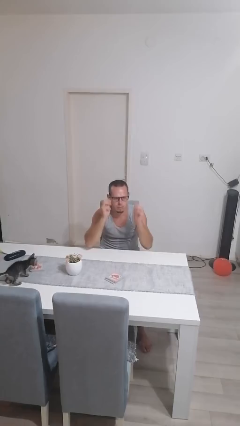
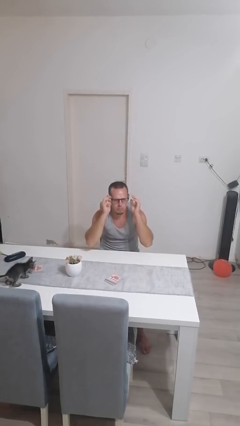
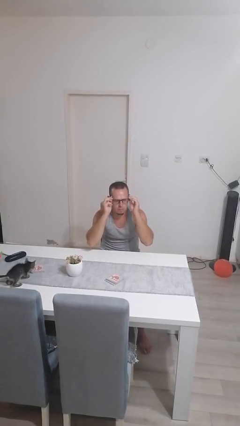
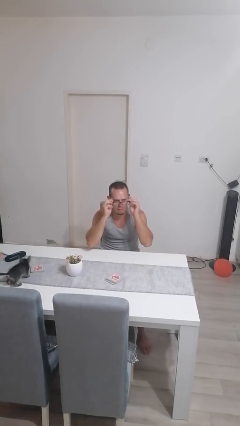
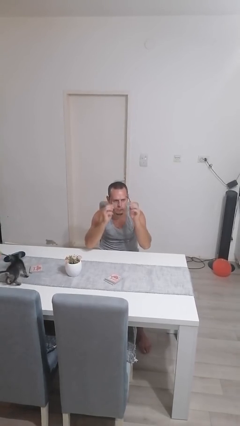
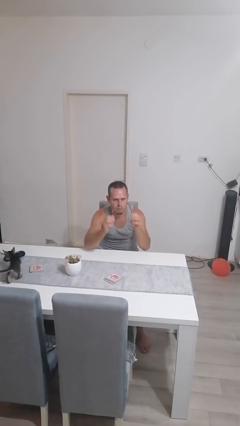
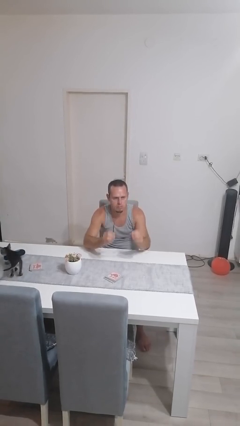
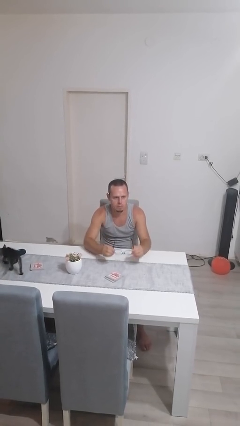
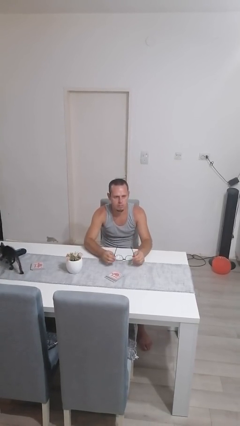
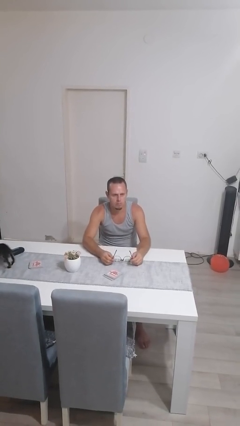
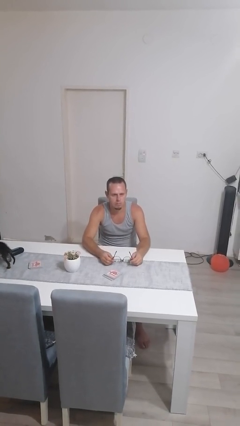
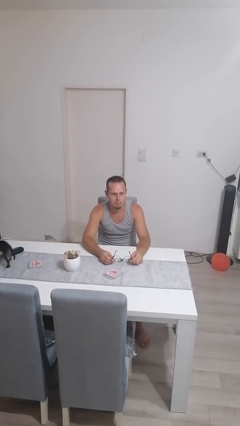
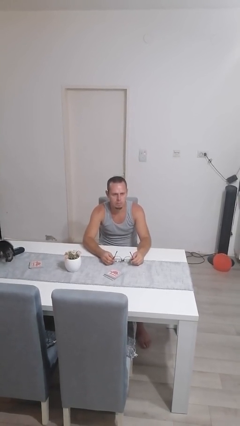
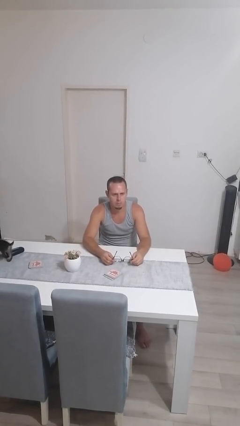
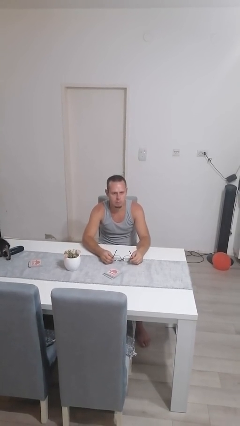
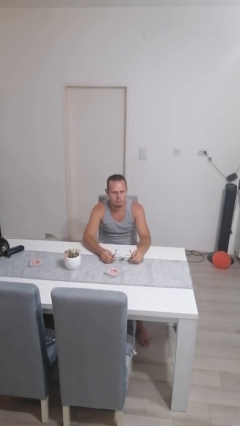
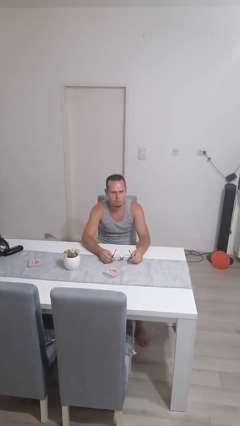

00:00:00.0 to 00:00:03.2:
person takes off glasses

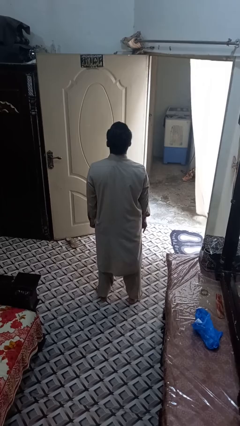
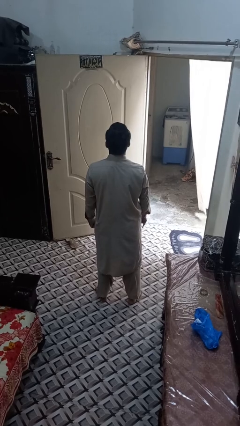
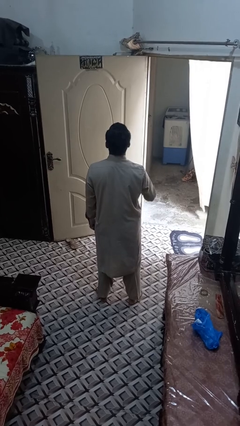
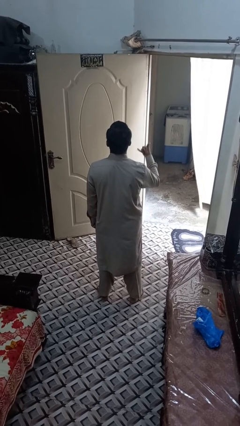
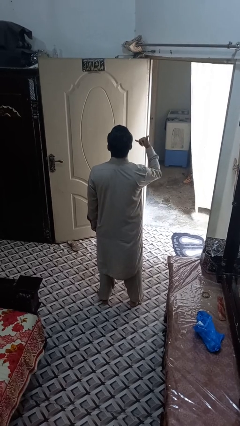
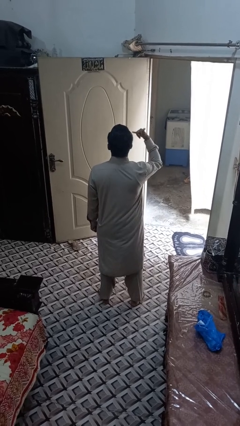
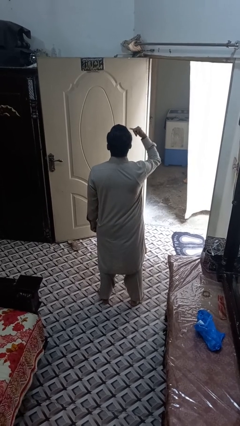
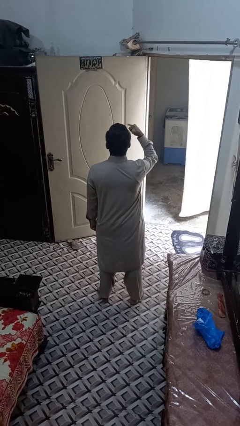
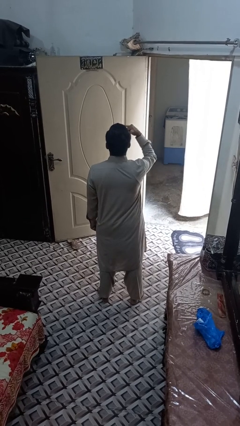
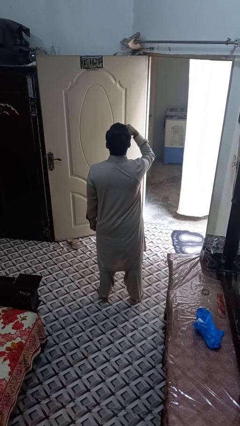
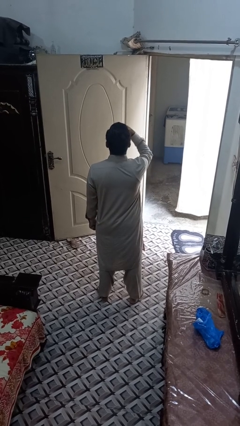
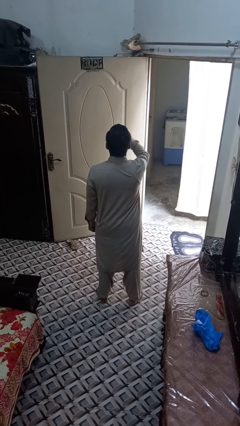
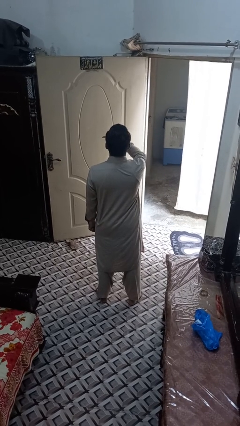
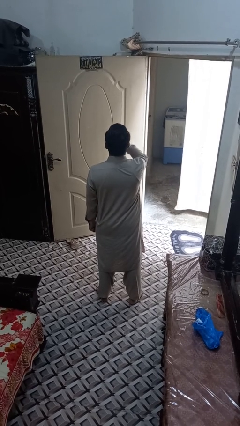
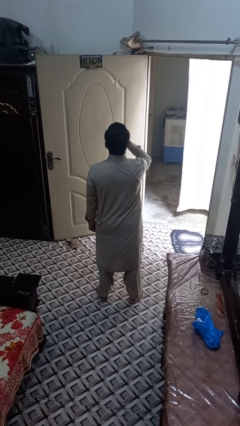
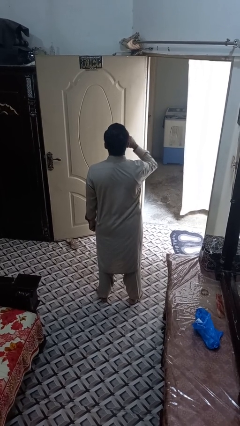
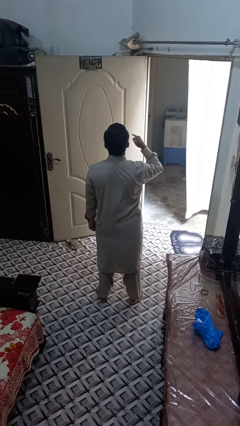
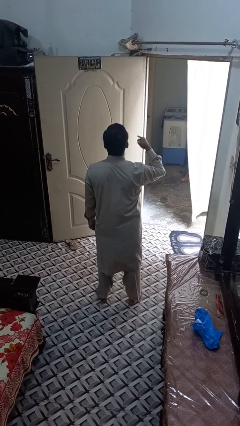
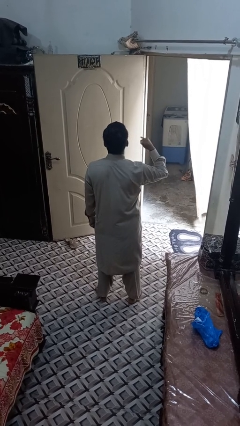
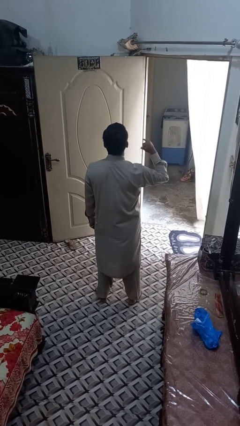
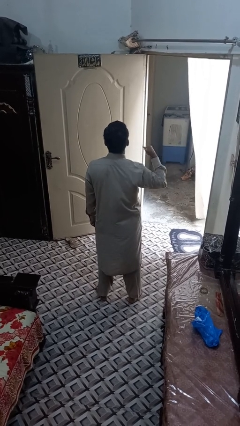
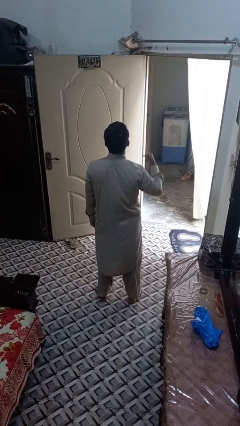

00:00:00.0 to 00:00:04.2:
person gestures hang loose

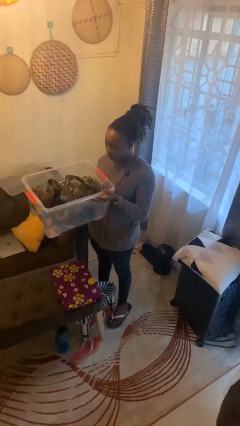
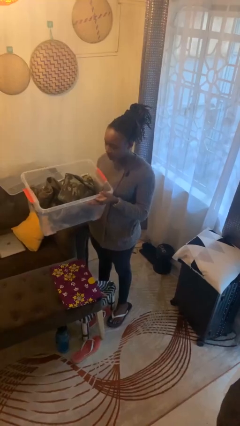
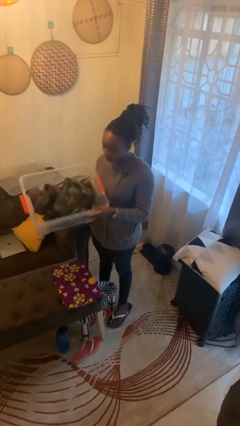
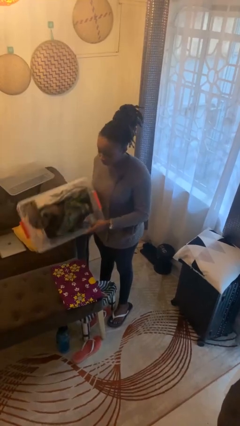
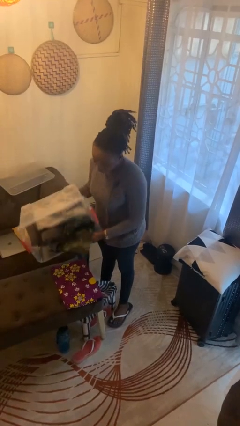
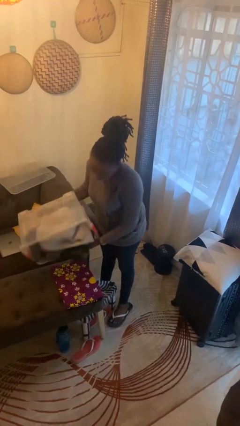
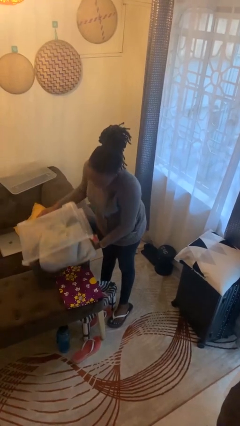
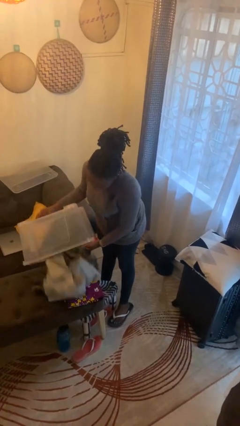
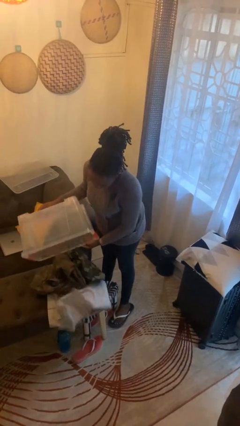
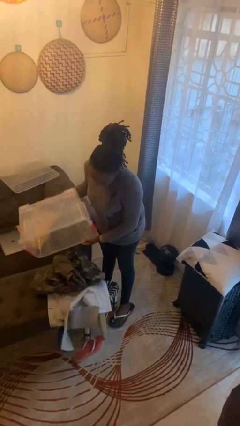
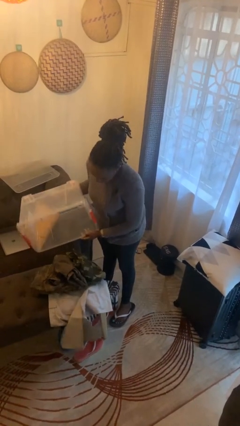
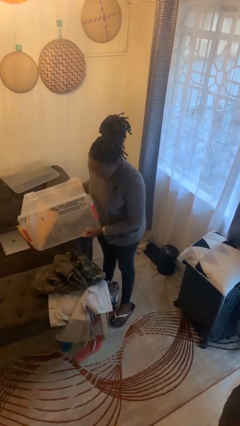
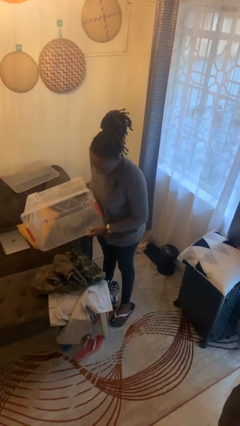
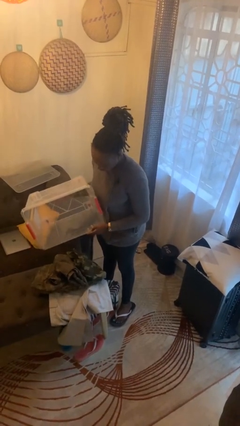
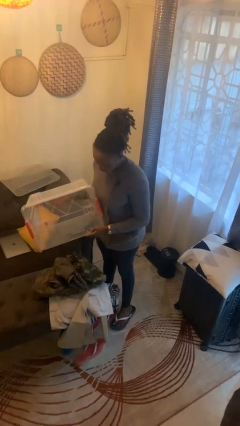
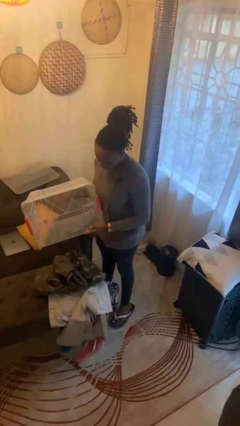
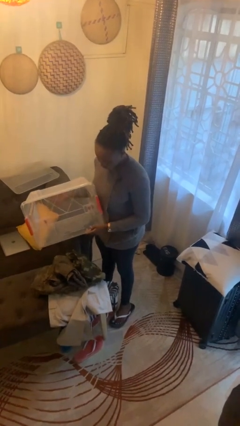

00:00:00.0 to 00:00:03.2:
person unloads box onto table

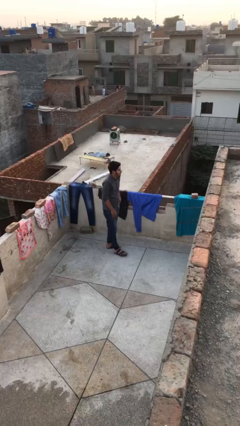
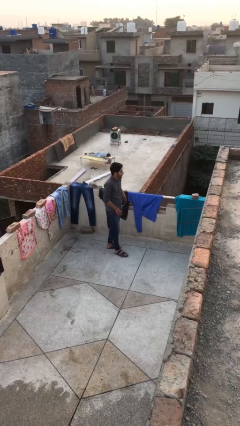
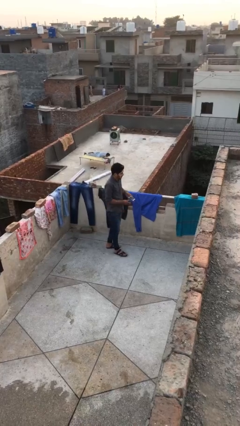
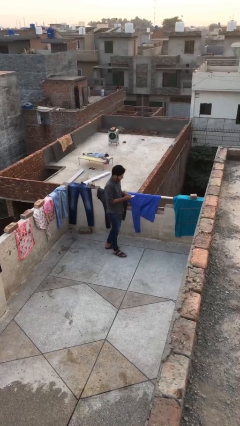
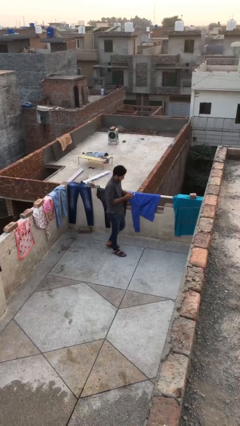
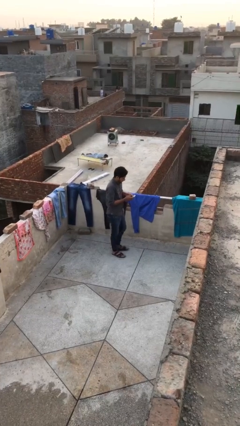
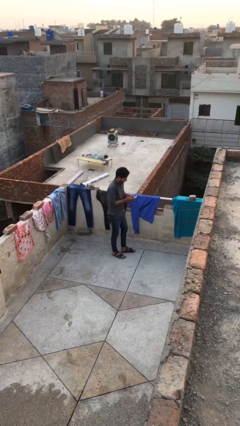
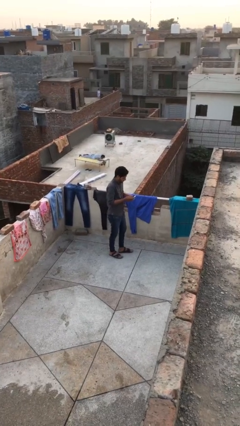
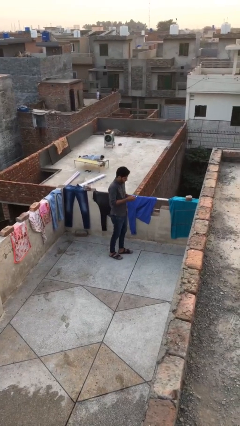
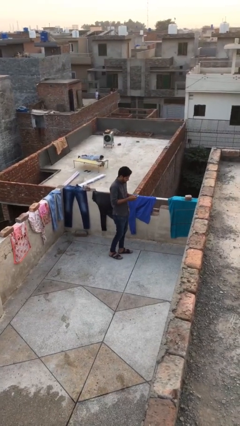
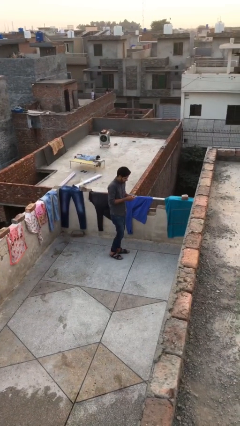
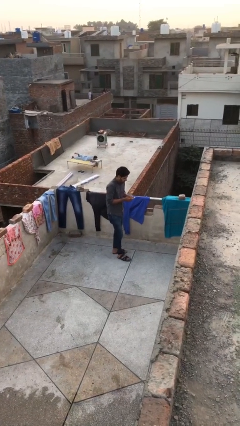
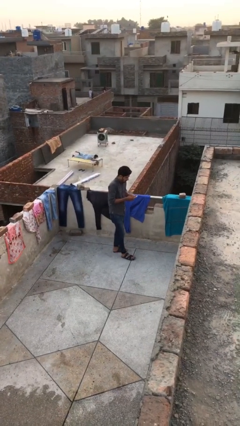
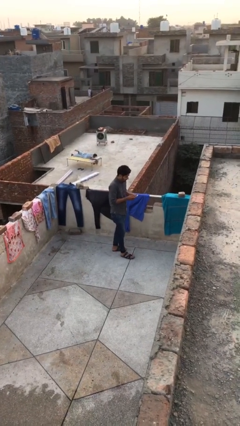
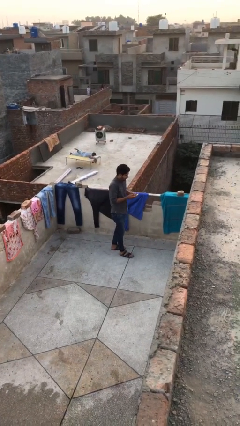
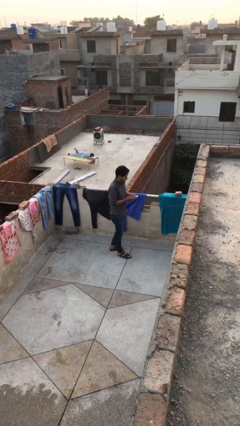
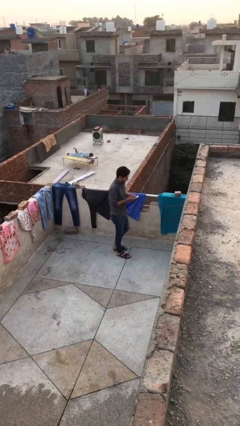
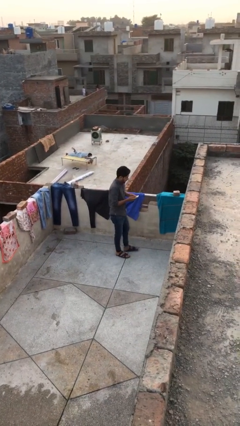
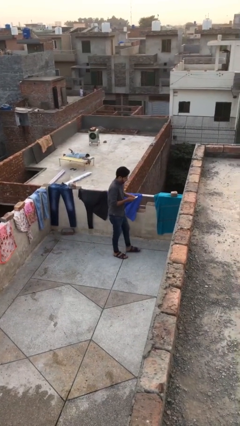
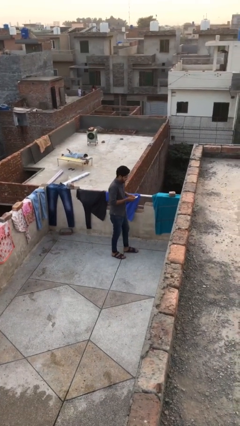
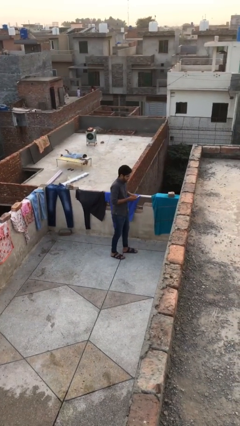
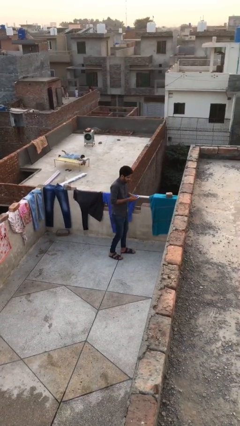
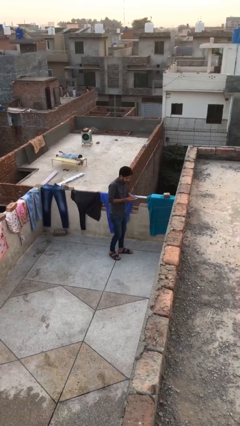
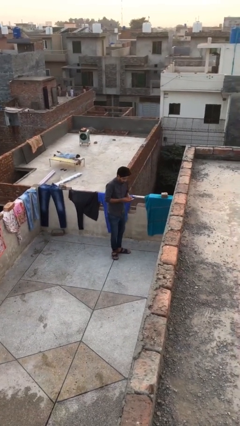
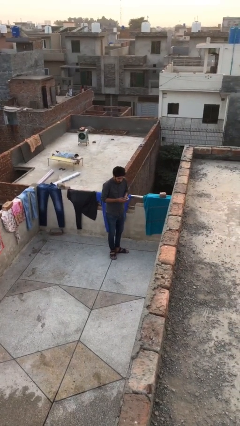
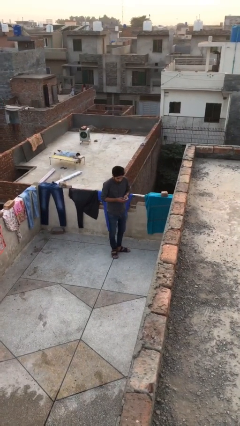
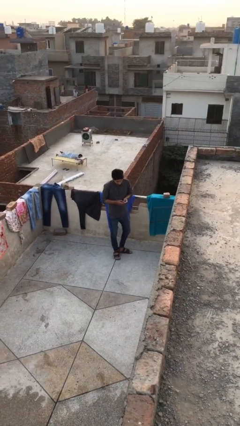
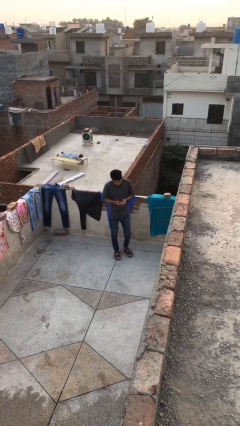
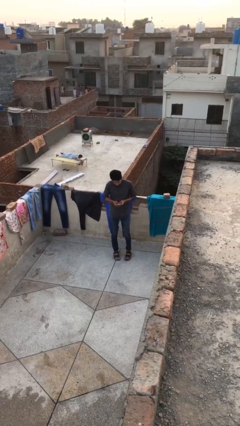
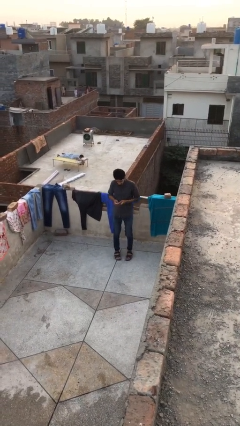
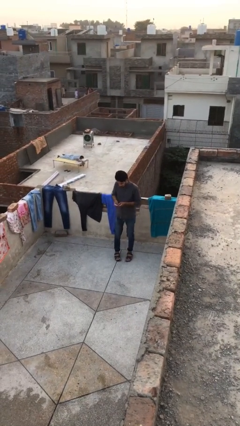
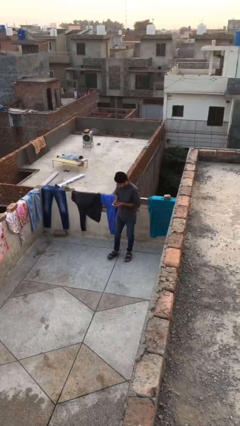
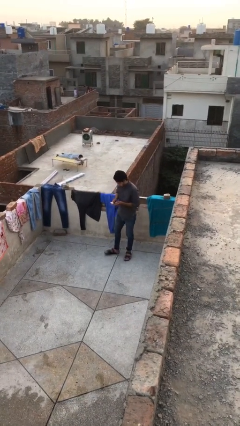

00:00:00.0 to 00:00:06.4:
person texts on phone

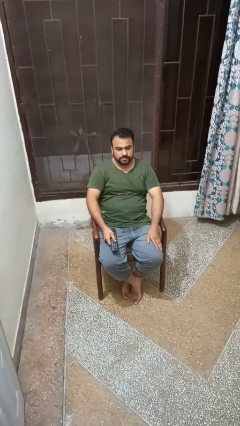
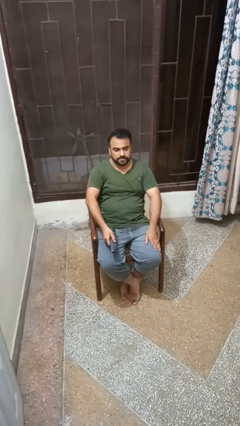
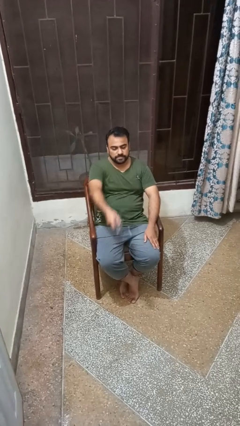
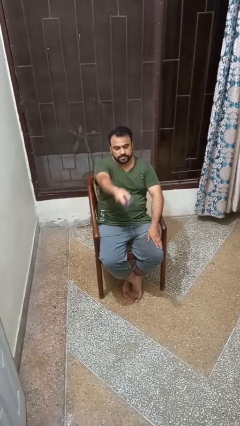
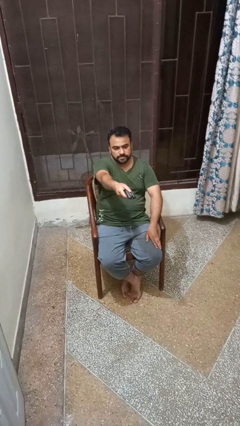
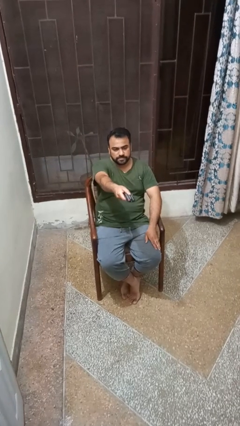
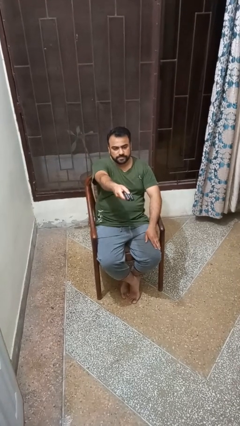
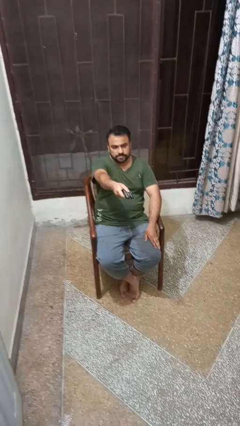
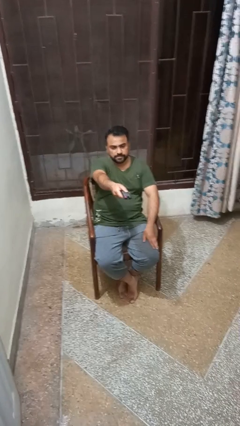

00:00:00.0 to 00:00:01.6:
person uses television remote
